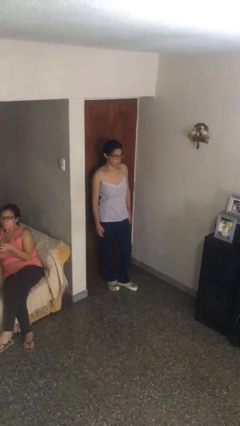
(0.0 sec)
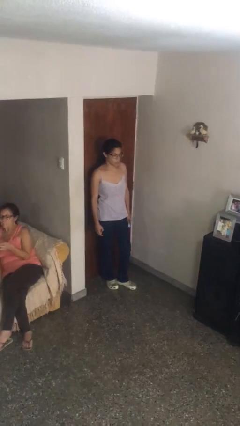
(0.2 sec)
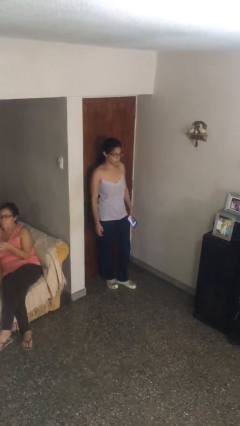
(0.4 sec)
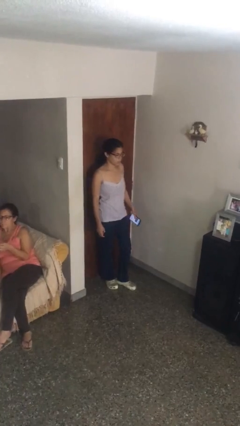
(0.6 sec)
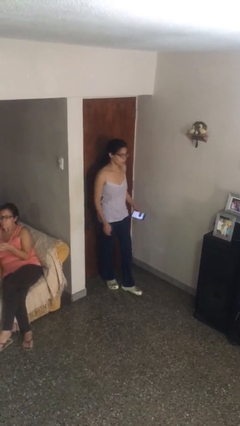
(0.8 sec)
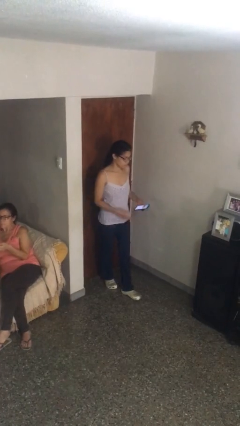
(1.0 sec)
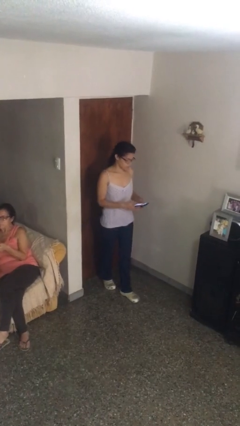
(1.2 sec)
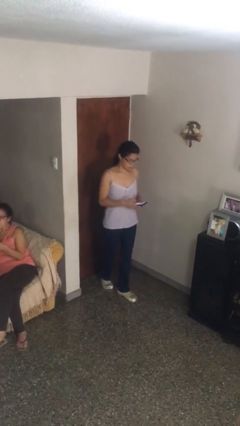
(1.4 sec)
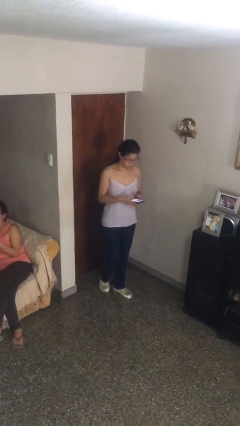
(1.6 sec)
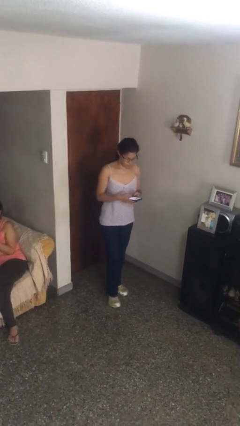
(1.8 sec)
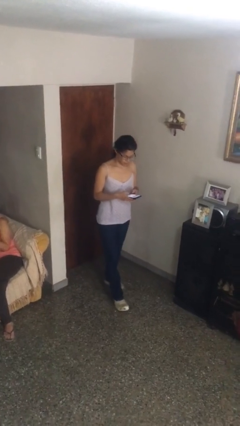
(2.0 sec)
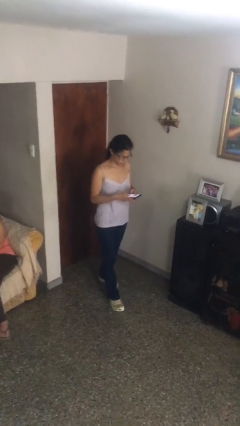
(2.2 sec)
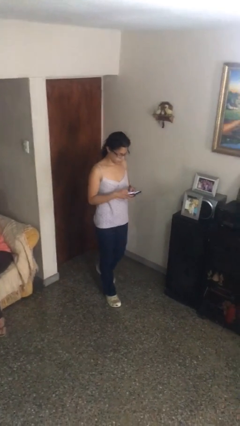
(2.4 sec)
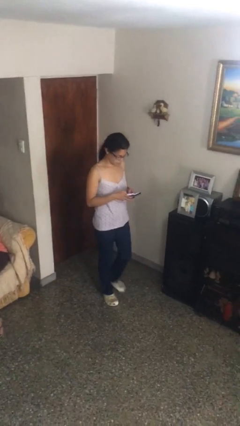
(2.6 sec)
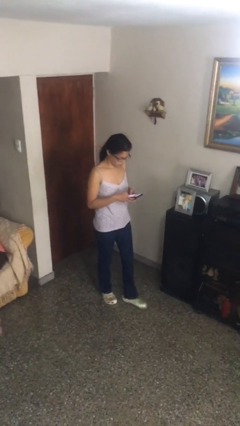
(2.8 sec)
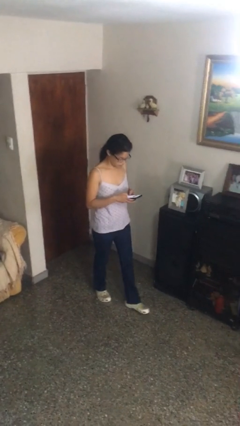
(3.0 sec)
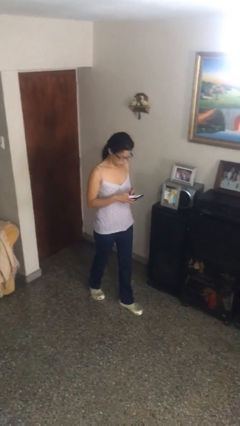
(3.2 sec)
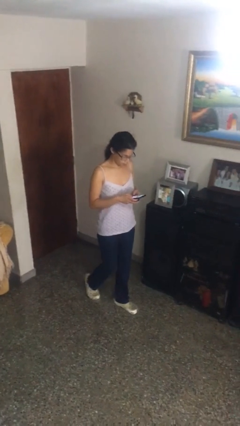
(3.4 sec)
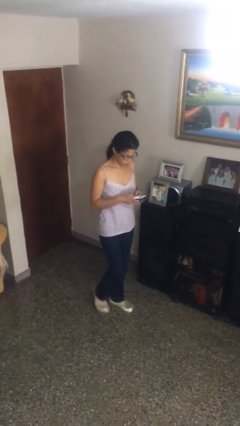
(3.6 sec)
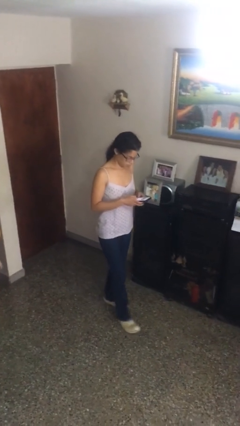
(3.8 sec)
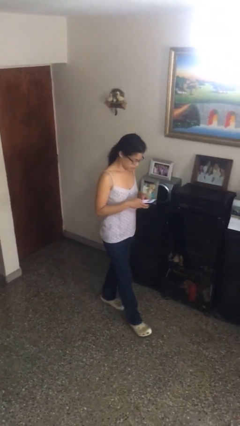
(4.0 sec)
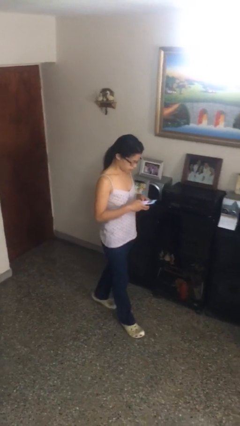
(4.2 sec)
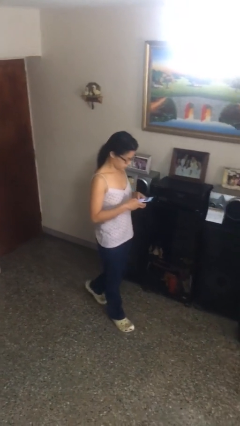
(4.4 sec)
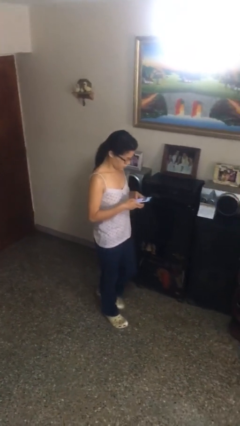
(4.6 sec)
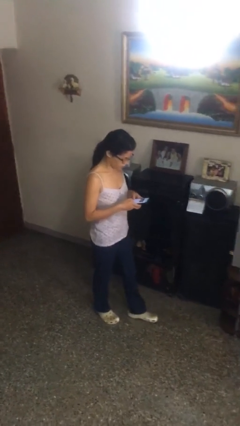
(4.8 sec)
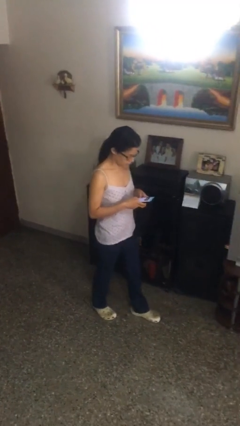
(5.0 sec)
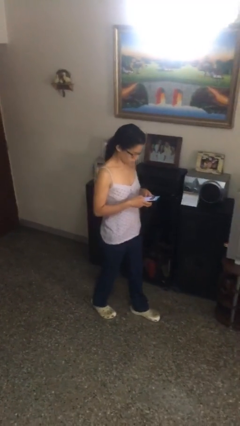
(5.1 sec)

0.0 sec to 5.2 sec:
person texts on phone

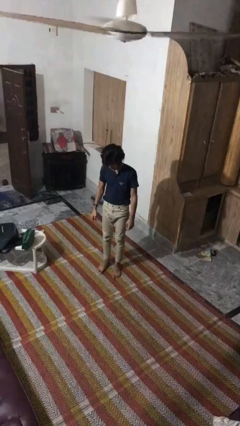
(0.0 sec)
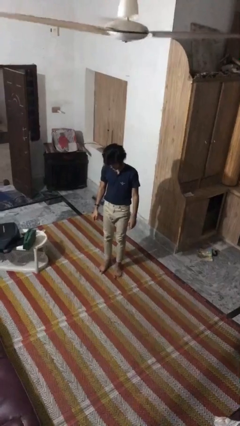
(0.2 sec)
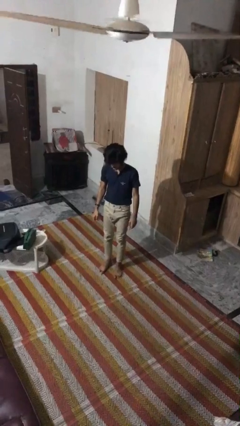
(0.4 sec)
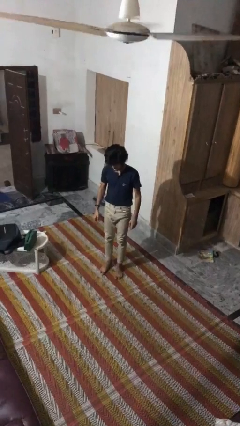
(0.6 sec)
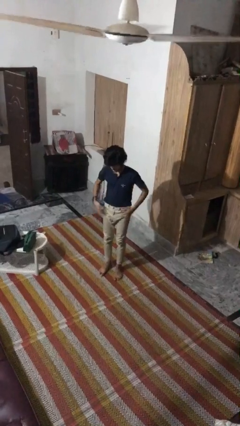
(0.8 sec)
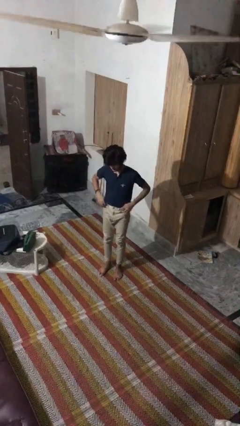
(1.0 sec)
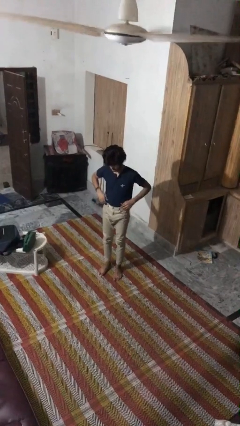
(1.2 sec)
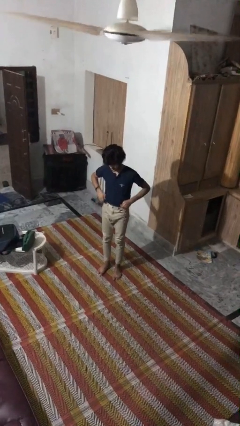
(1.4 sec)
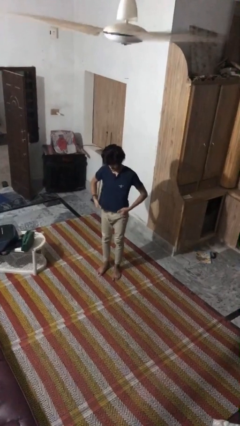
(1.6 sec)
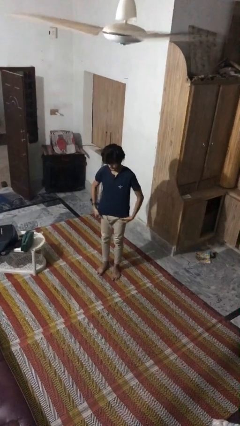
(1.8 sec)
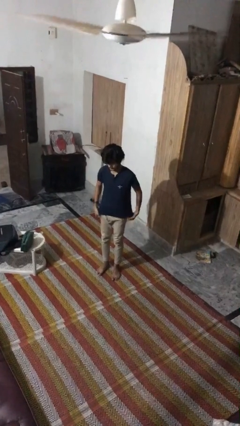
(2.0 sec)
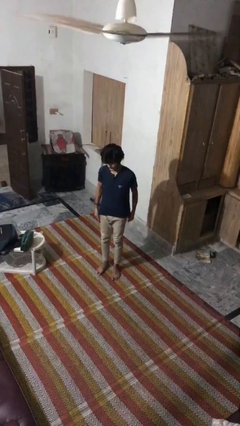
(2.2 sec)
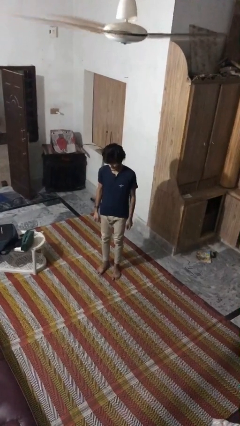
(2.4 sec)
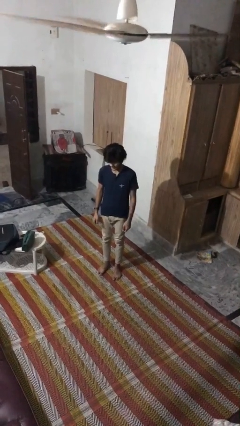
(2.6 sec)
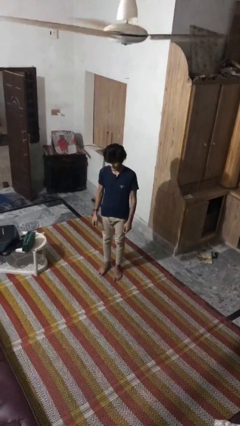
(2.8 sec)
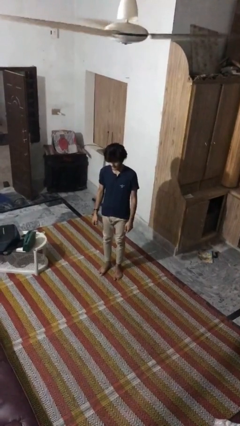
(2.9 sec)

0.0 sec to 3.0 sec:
person untucks shirt

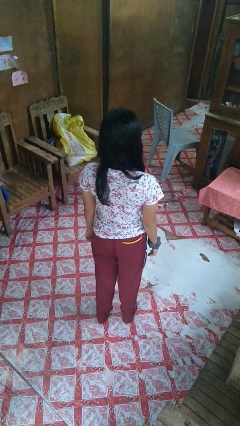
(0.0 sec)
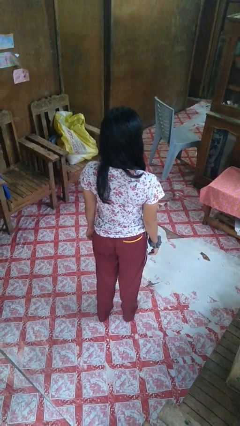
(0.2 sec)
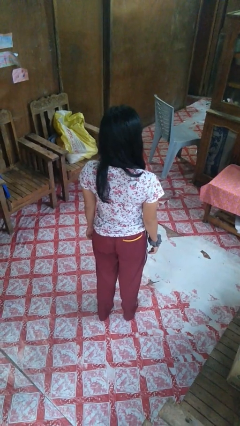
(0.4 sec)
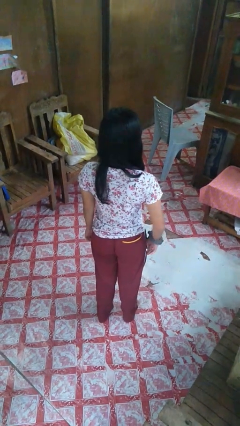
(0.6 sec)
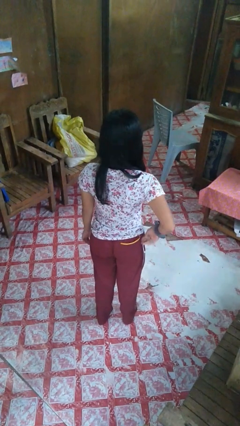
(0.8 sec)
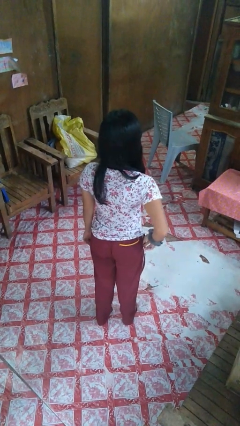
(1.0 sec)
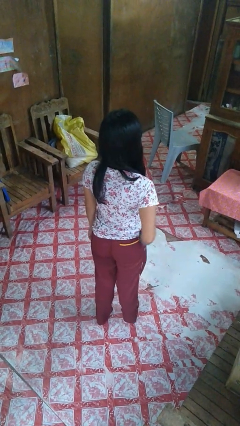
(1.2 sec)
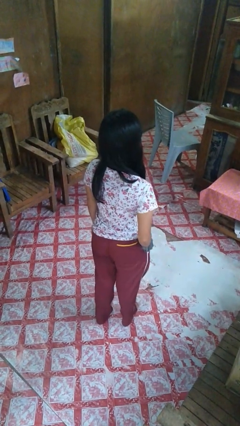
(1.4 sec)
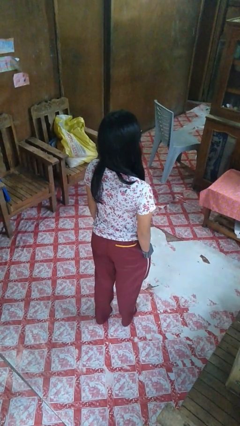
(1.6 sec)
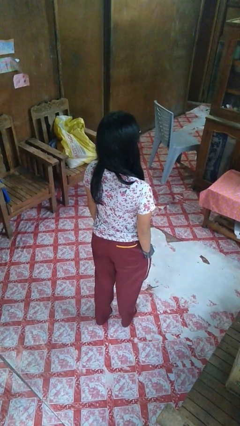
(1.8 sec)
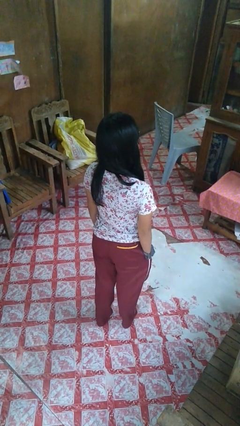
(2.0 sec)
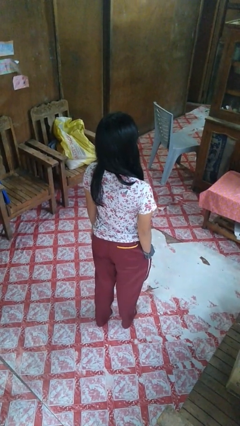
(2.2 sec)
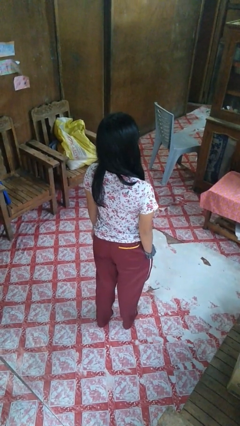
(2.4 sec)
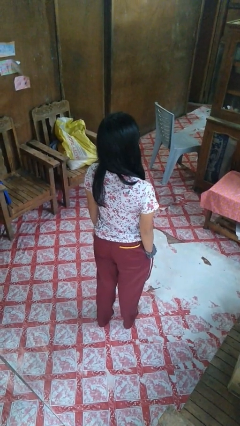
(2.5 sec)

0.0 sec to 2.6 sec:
person puts hands in back pockets

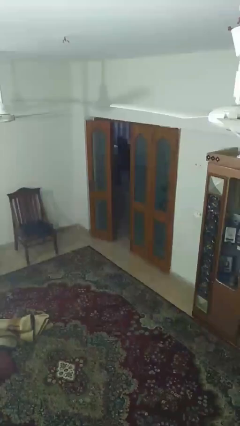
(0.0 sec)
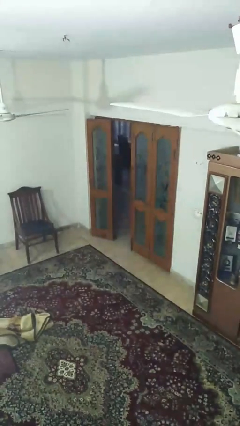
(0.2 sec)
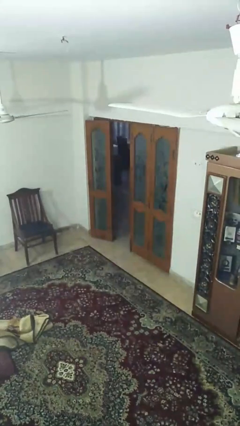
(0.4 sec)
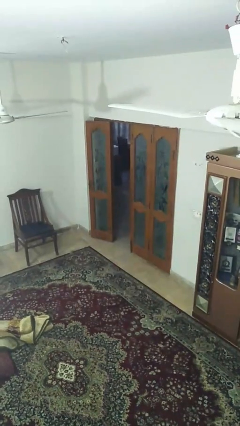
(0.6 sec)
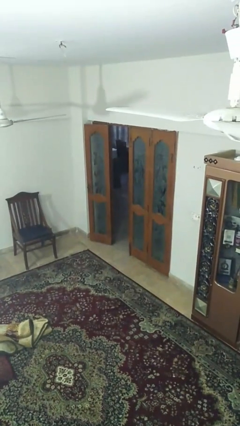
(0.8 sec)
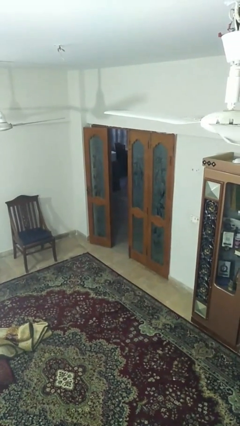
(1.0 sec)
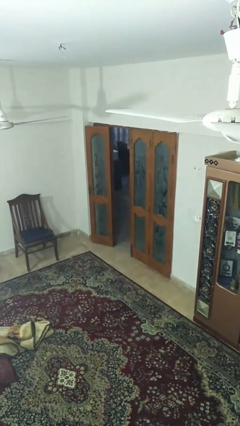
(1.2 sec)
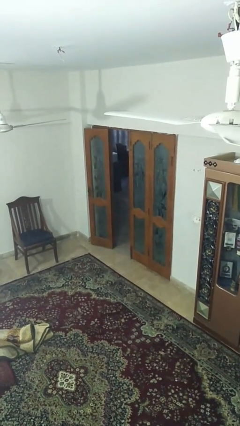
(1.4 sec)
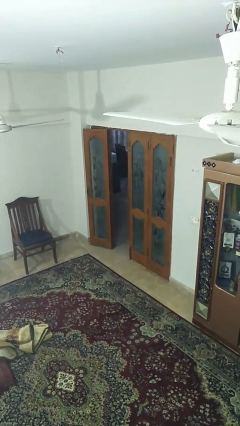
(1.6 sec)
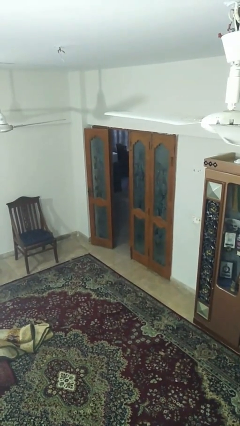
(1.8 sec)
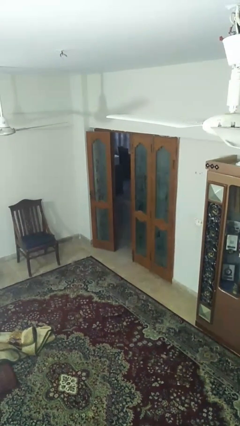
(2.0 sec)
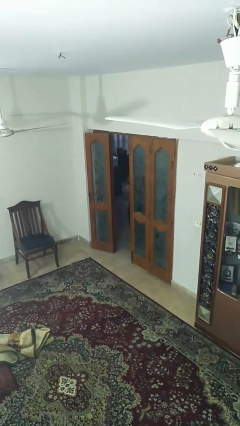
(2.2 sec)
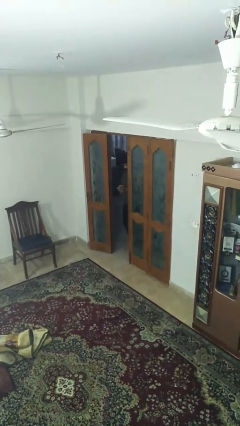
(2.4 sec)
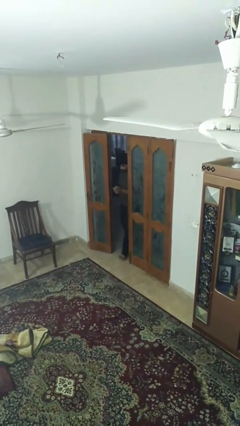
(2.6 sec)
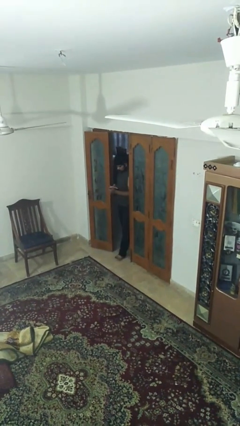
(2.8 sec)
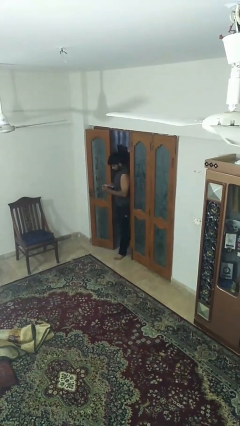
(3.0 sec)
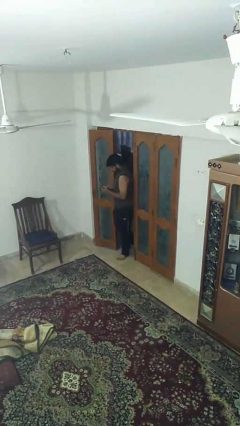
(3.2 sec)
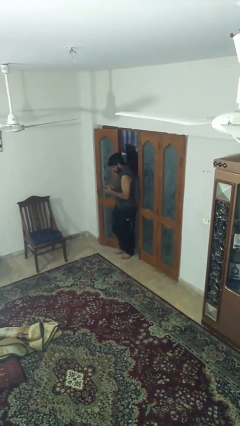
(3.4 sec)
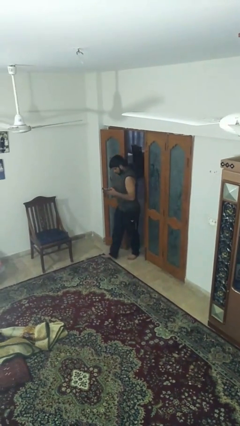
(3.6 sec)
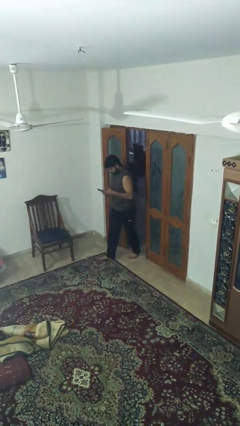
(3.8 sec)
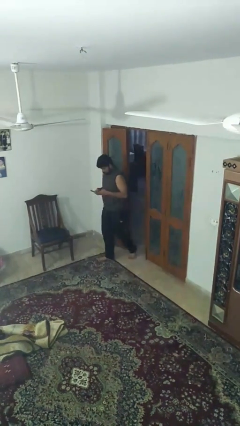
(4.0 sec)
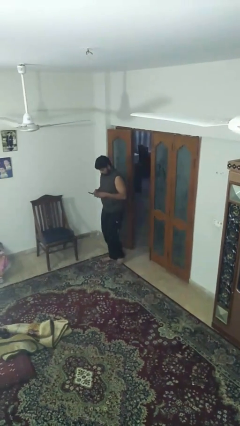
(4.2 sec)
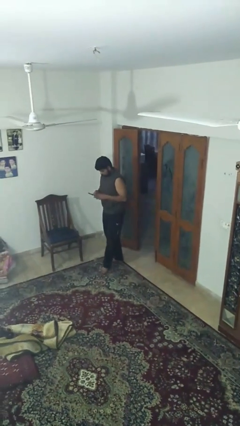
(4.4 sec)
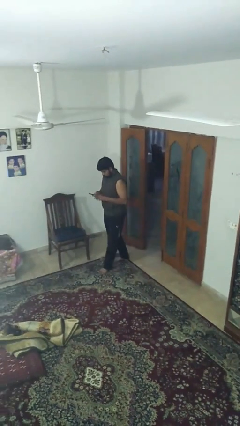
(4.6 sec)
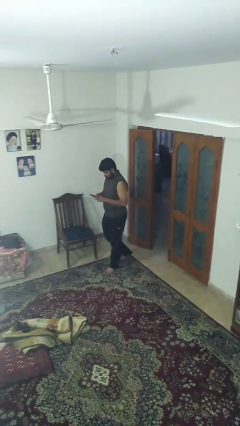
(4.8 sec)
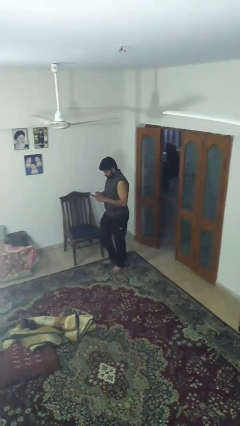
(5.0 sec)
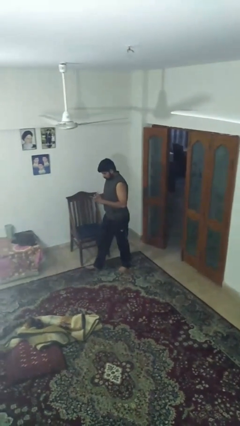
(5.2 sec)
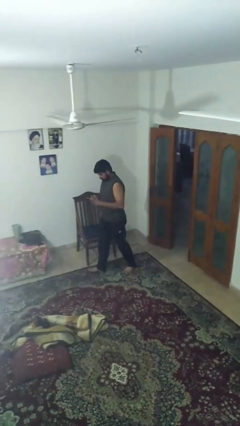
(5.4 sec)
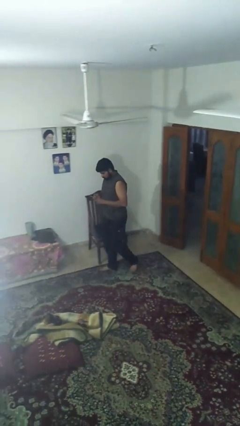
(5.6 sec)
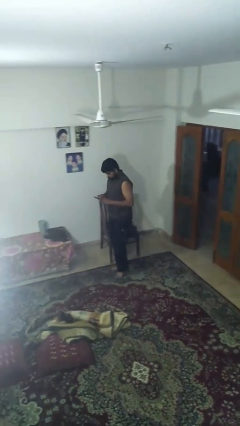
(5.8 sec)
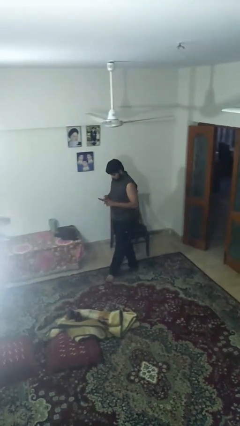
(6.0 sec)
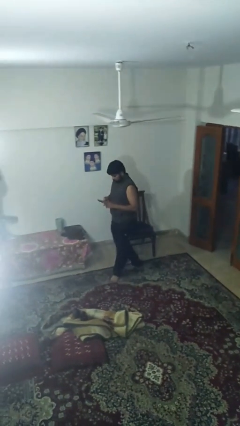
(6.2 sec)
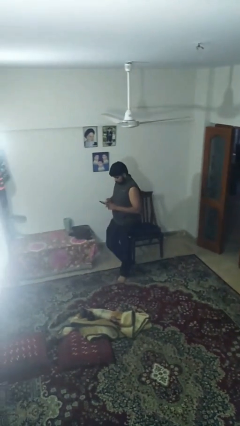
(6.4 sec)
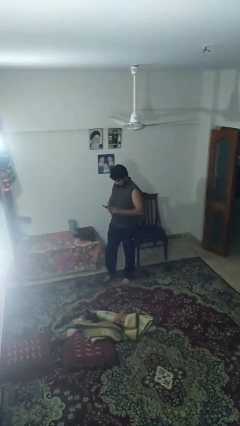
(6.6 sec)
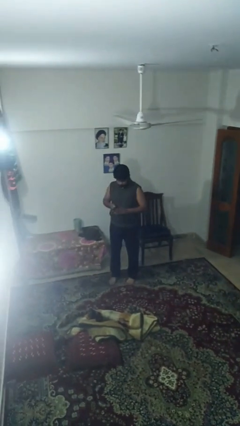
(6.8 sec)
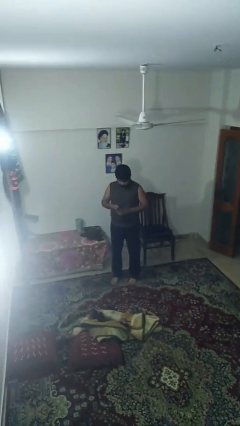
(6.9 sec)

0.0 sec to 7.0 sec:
person enters scene through structure
